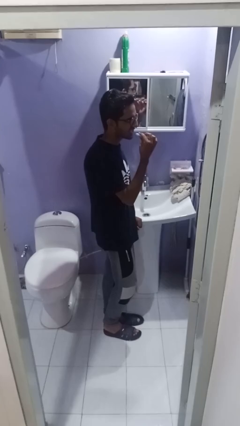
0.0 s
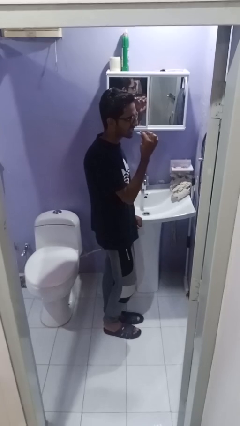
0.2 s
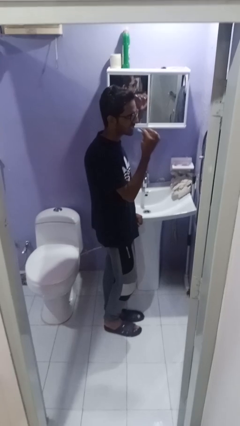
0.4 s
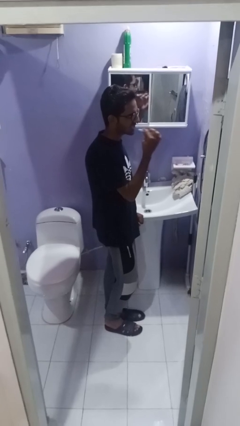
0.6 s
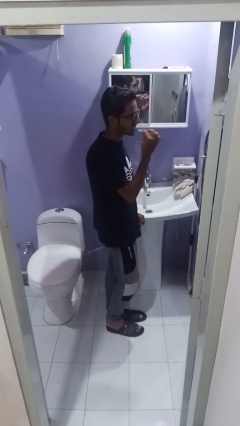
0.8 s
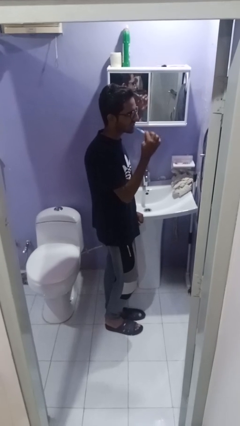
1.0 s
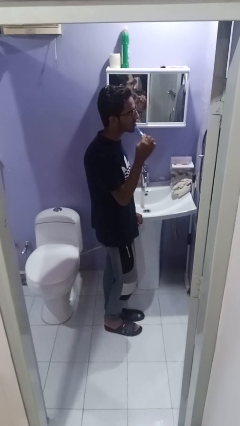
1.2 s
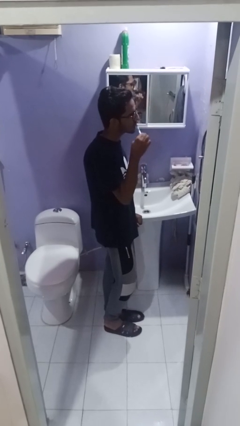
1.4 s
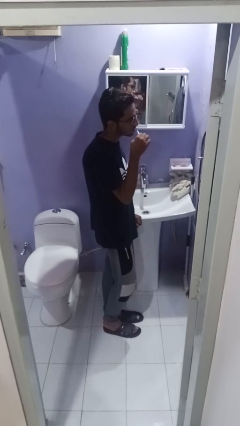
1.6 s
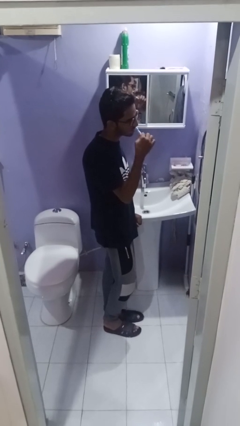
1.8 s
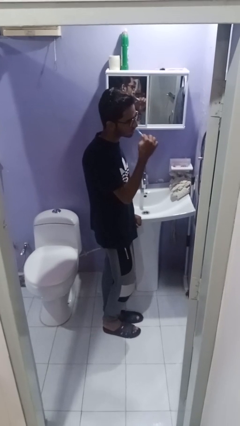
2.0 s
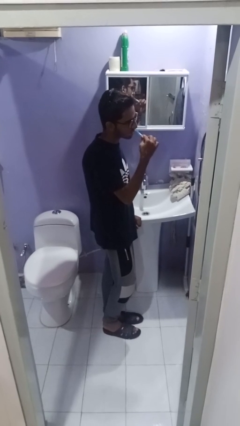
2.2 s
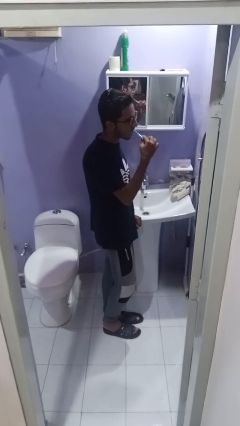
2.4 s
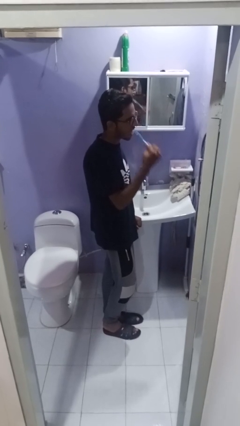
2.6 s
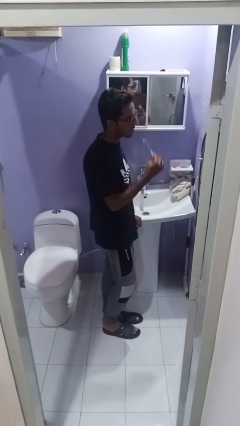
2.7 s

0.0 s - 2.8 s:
person brushes teeth

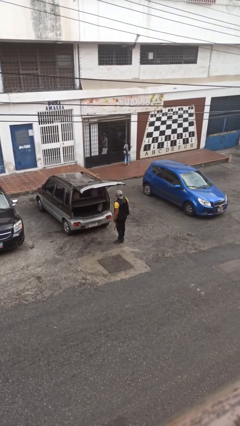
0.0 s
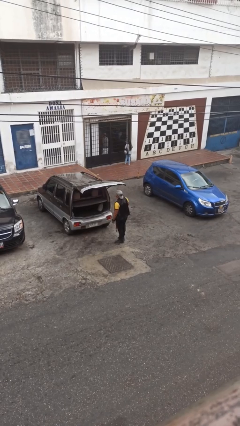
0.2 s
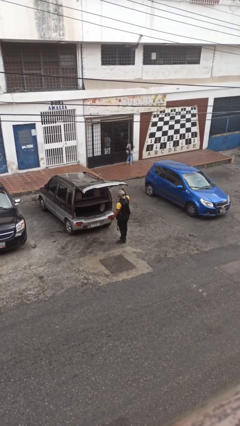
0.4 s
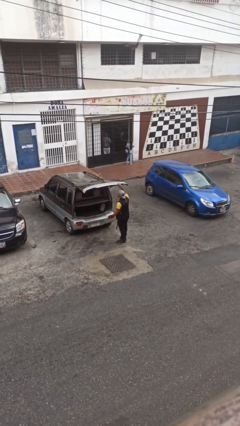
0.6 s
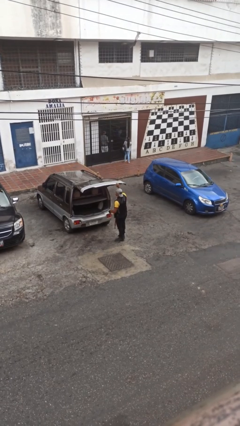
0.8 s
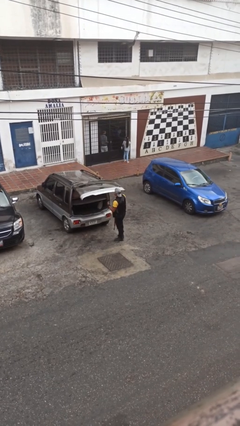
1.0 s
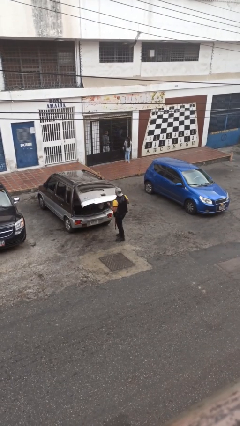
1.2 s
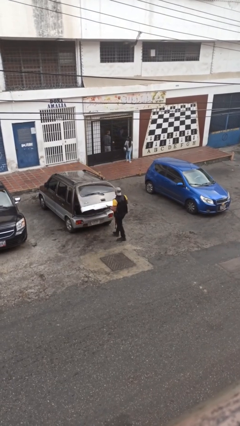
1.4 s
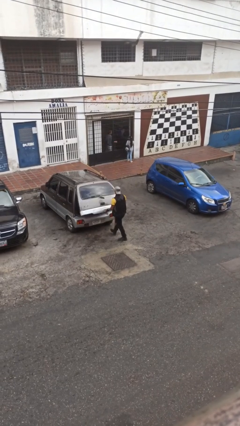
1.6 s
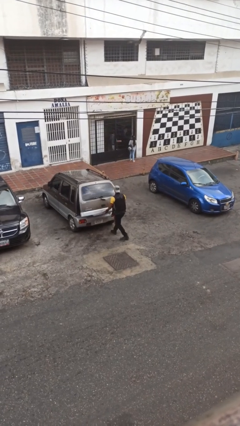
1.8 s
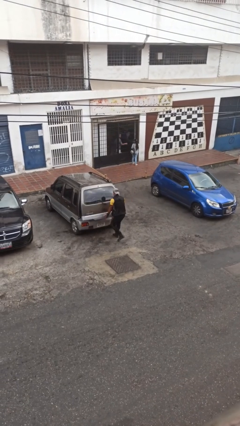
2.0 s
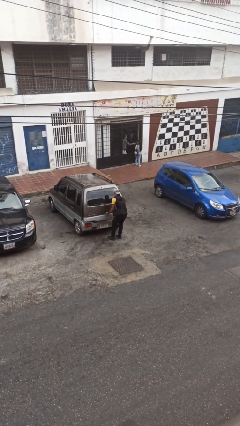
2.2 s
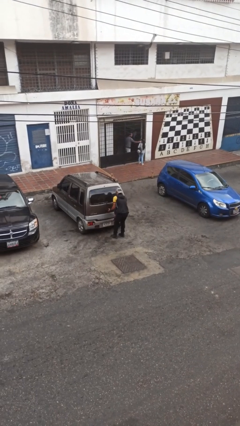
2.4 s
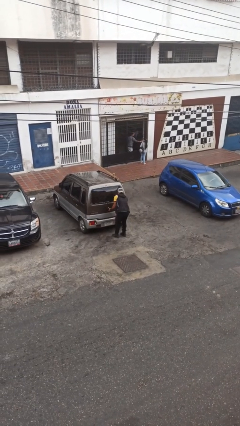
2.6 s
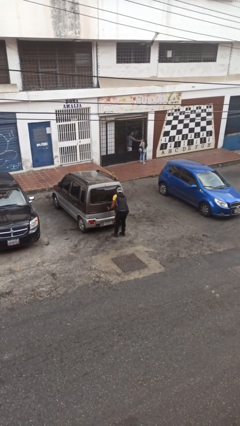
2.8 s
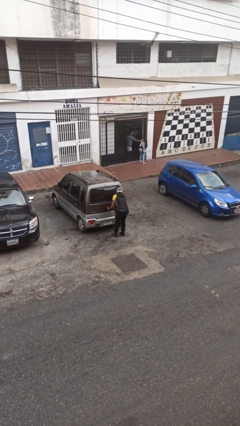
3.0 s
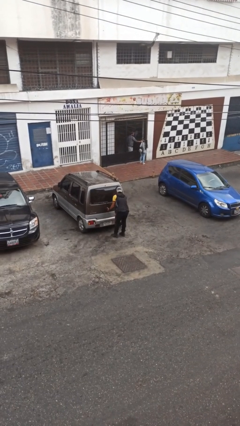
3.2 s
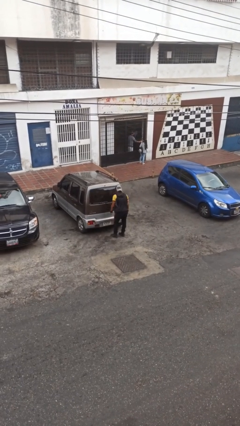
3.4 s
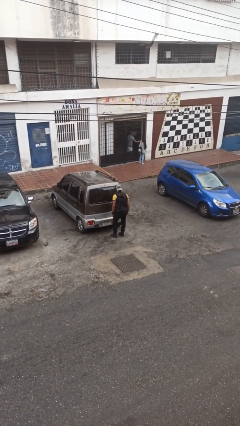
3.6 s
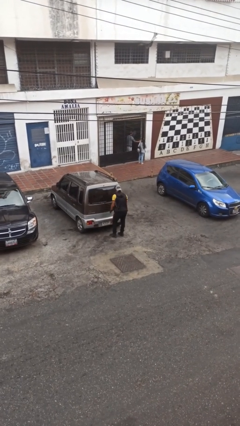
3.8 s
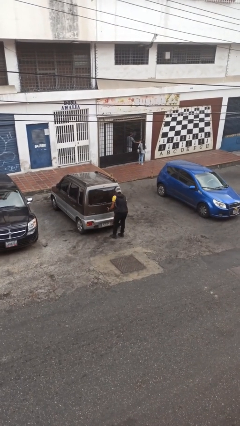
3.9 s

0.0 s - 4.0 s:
person closes car trunk

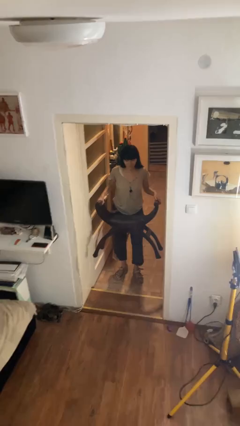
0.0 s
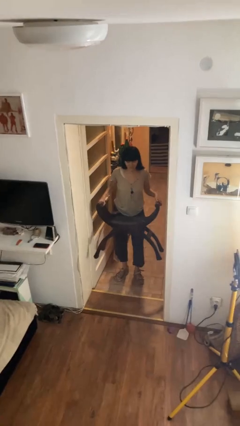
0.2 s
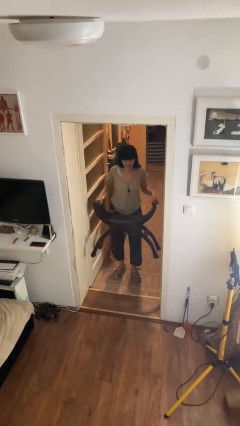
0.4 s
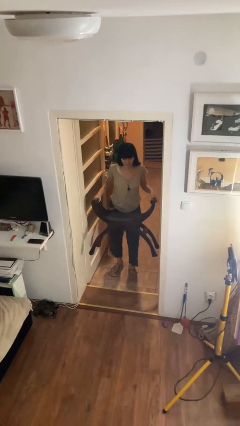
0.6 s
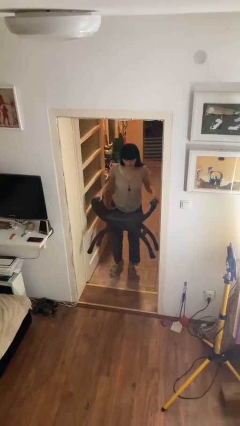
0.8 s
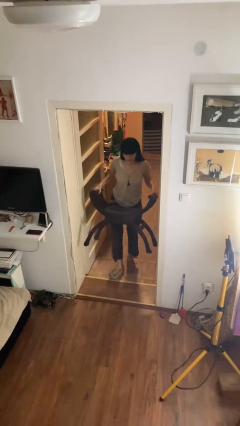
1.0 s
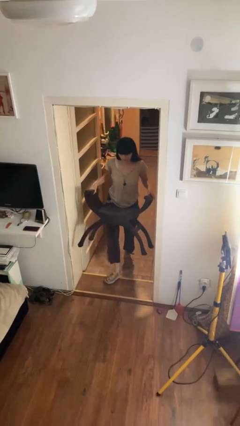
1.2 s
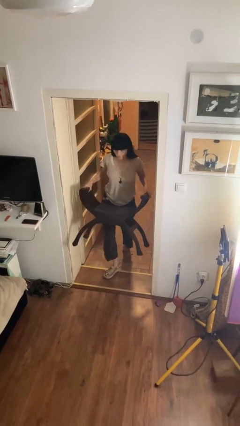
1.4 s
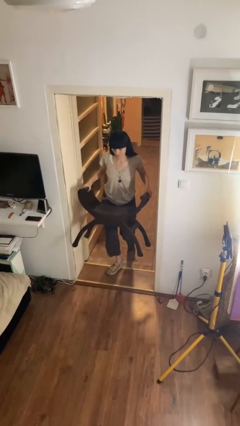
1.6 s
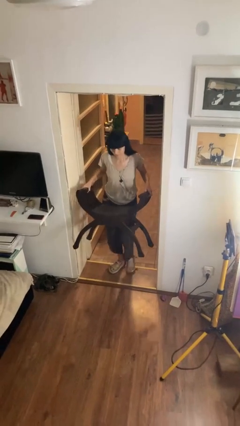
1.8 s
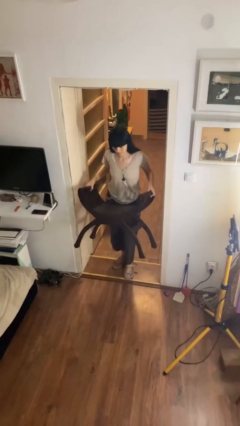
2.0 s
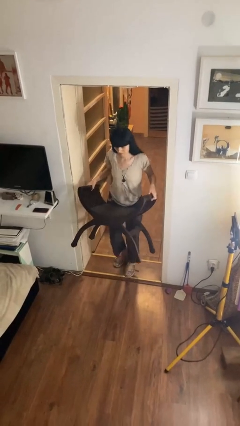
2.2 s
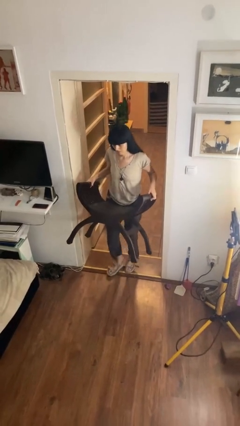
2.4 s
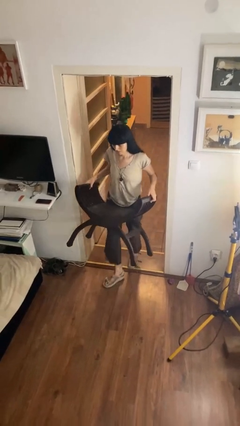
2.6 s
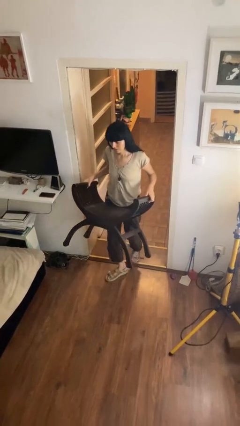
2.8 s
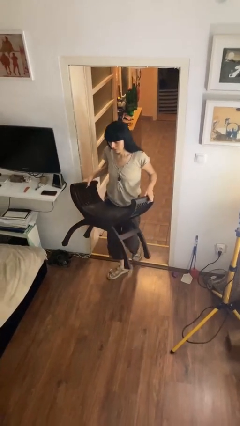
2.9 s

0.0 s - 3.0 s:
person carries furniture

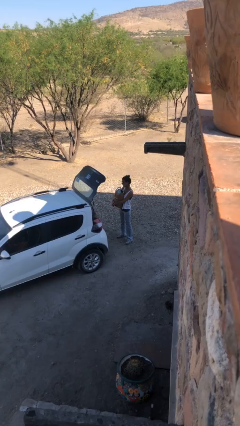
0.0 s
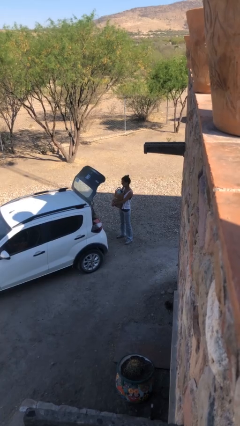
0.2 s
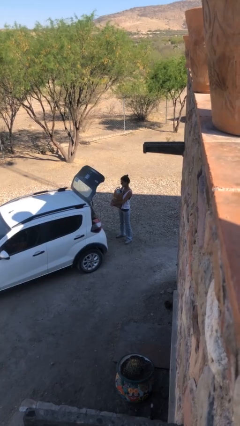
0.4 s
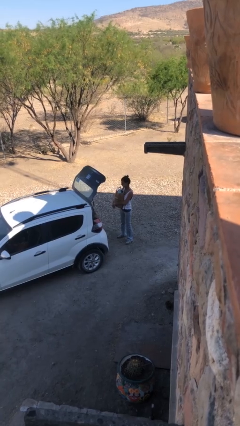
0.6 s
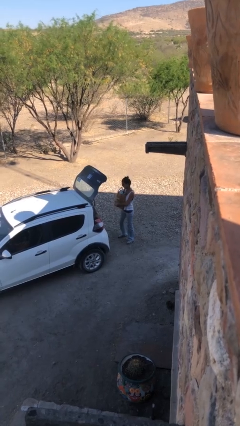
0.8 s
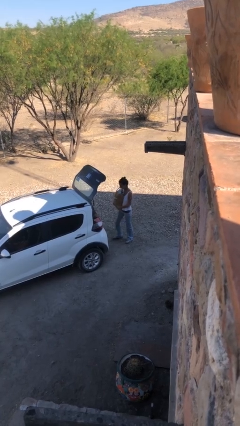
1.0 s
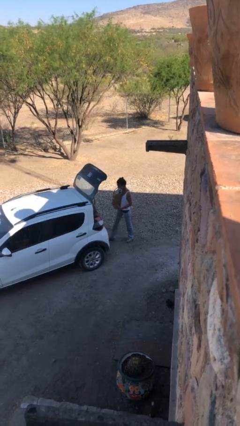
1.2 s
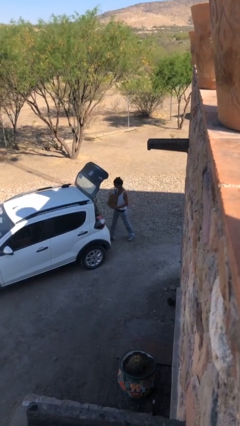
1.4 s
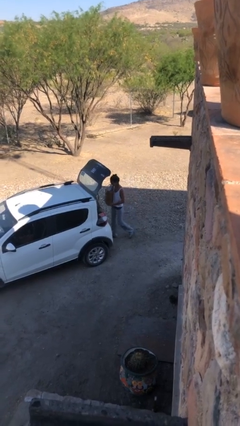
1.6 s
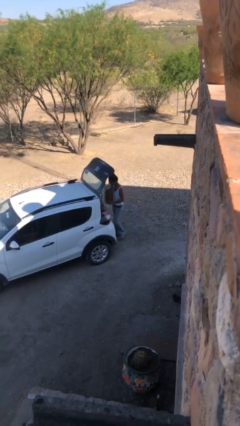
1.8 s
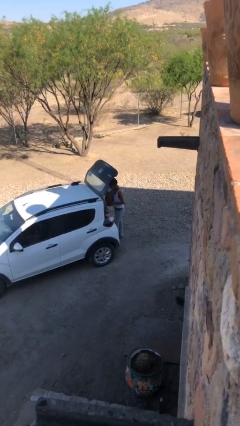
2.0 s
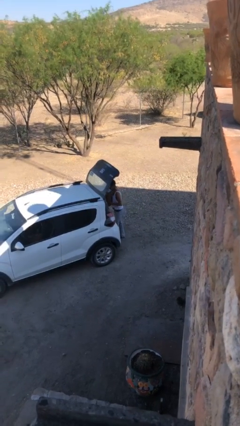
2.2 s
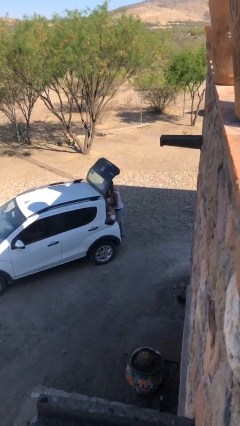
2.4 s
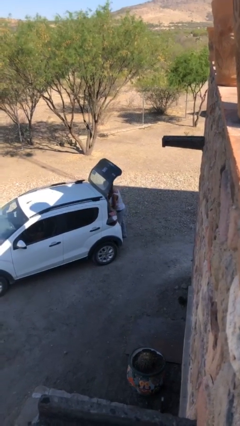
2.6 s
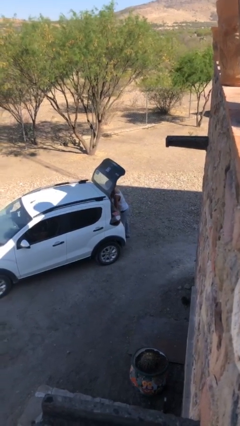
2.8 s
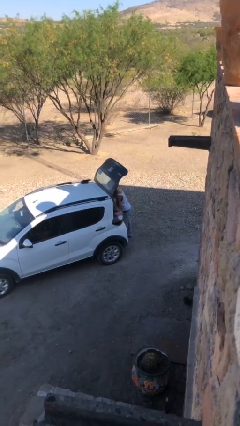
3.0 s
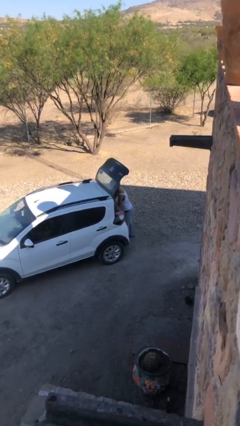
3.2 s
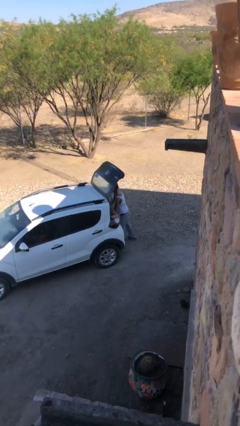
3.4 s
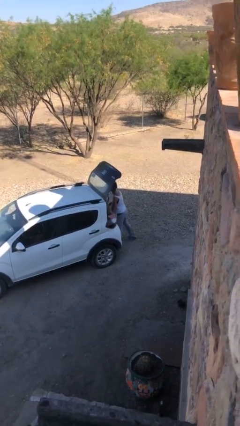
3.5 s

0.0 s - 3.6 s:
person loads car

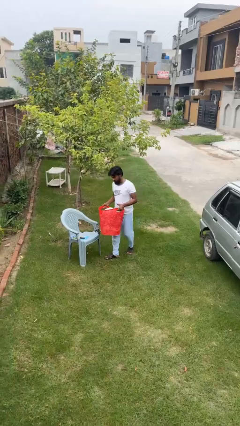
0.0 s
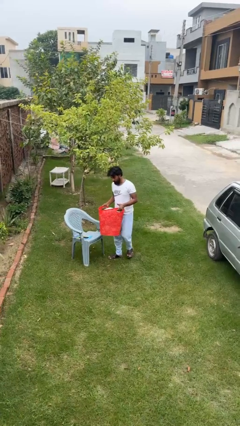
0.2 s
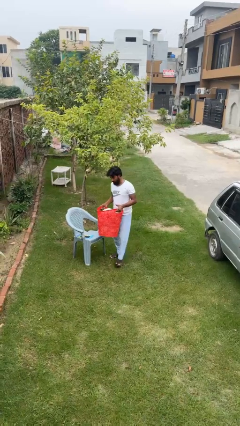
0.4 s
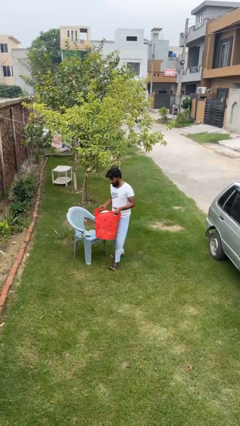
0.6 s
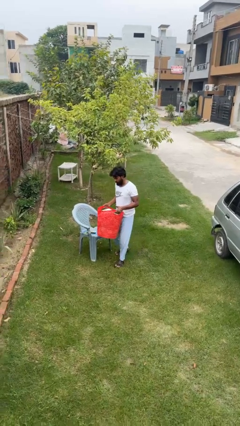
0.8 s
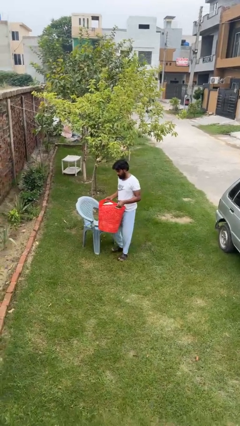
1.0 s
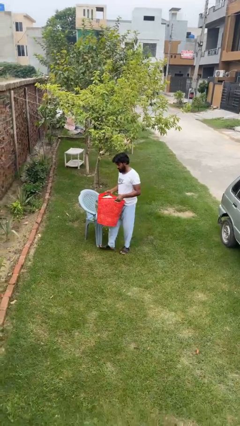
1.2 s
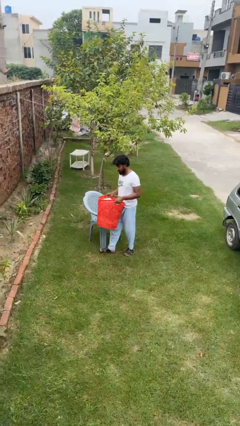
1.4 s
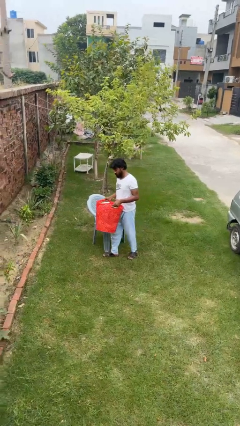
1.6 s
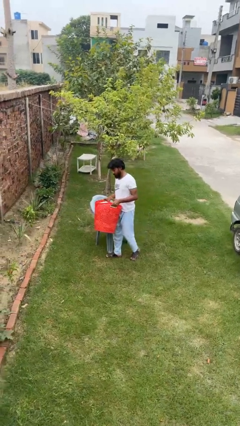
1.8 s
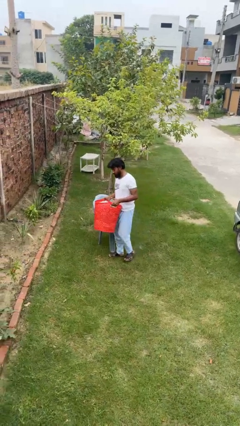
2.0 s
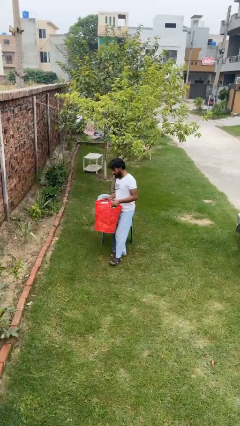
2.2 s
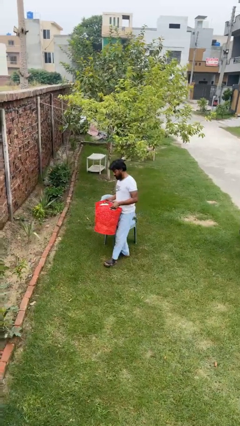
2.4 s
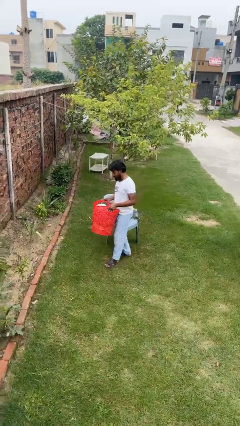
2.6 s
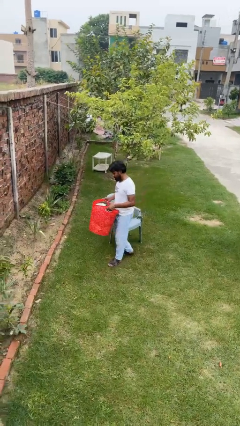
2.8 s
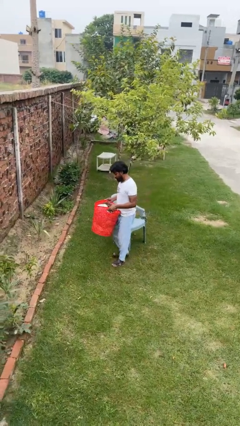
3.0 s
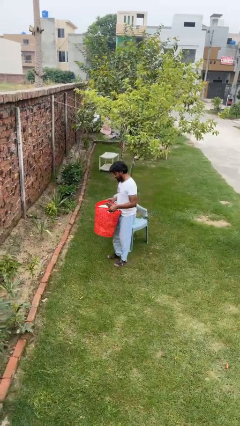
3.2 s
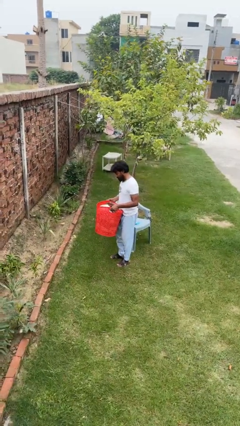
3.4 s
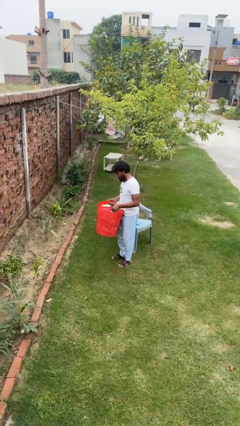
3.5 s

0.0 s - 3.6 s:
person carries laundry basket

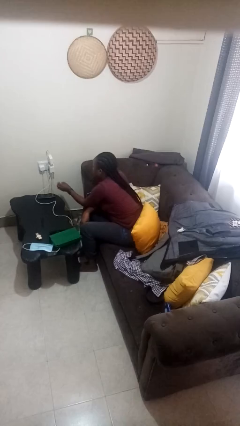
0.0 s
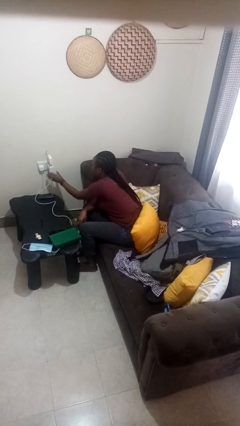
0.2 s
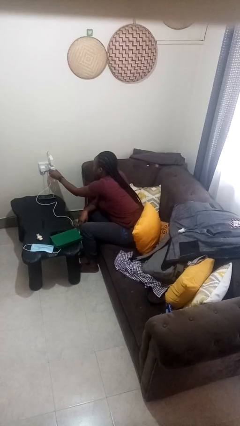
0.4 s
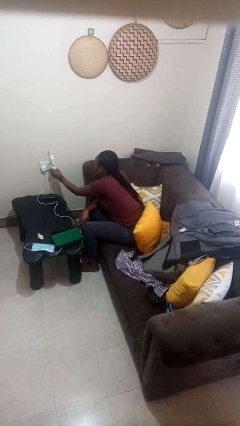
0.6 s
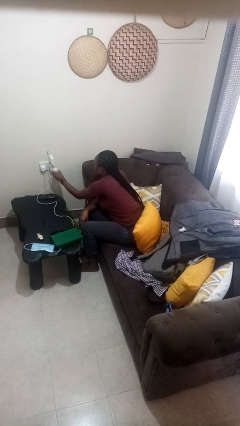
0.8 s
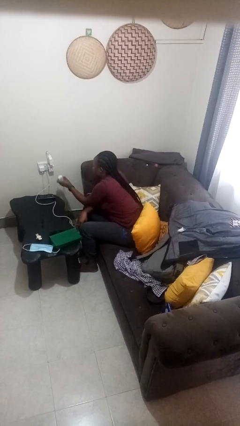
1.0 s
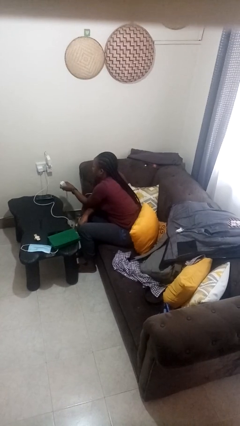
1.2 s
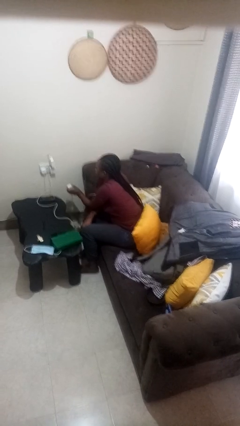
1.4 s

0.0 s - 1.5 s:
person unplugs from electrical socket
